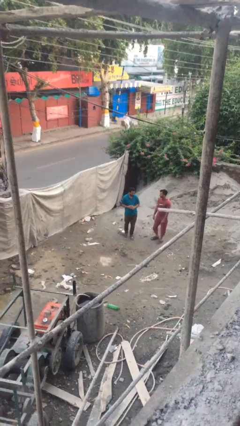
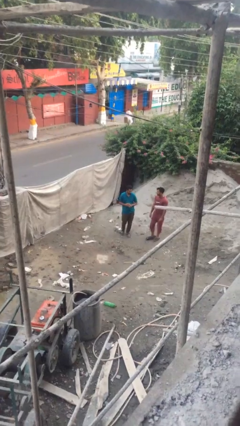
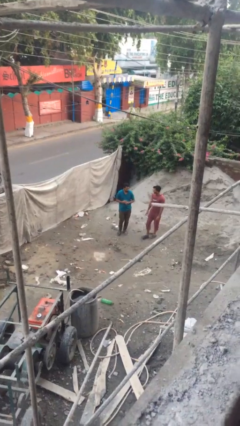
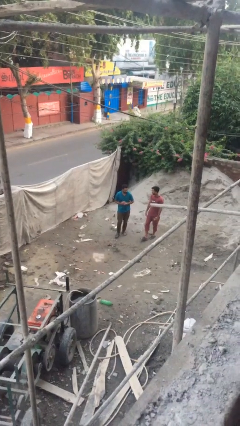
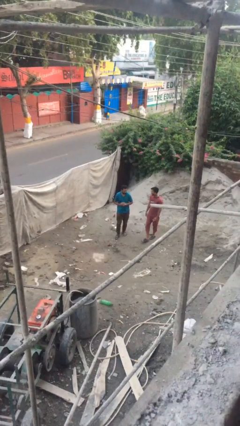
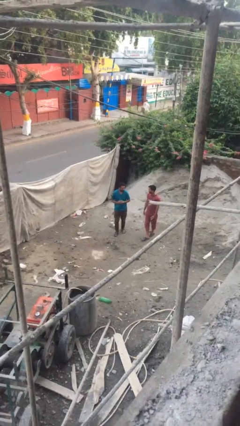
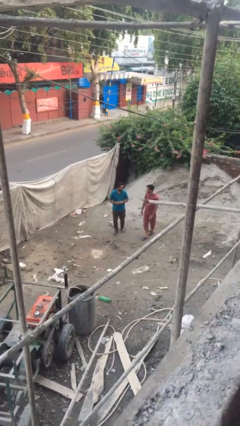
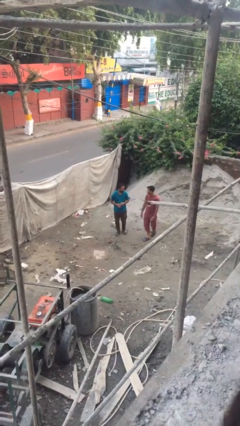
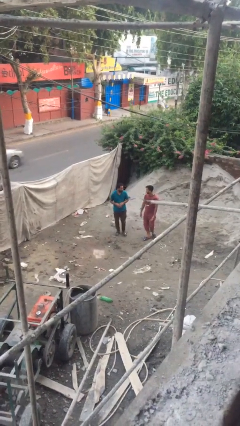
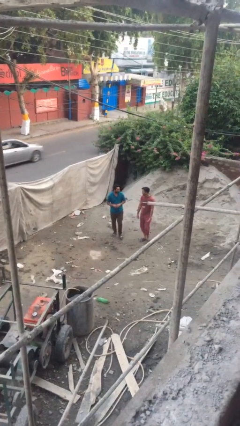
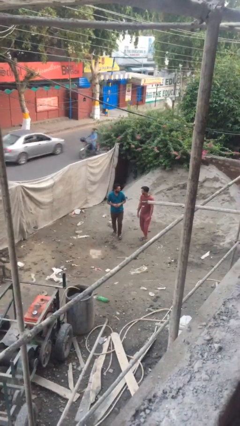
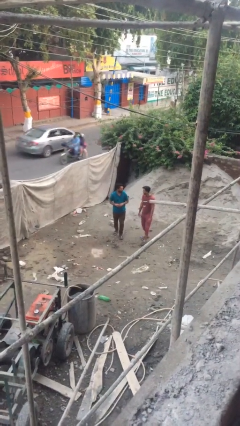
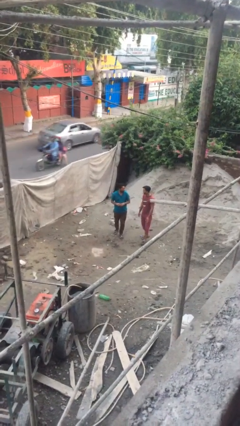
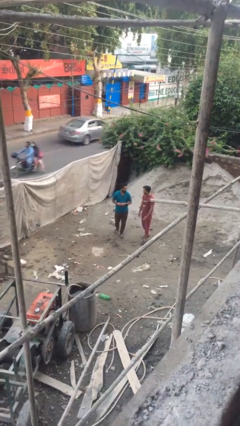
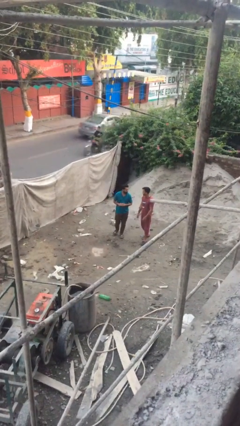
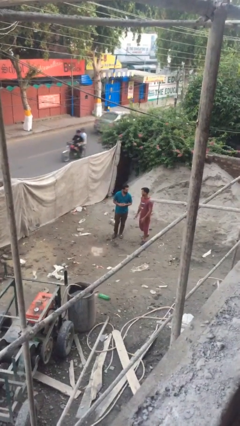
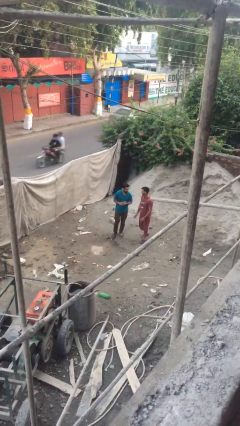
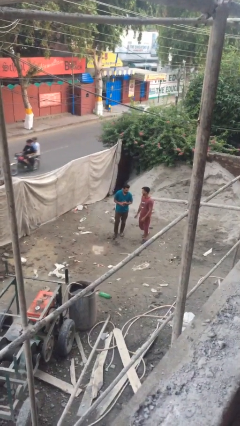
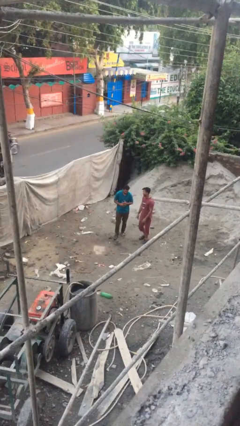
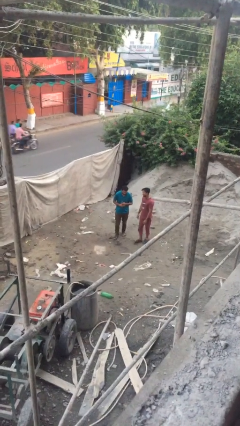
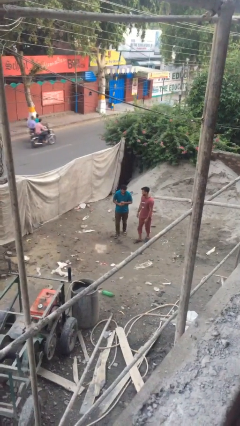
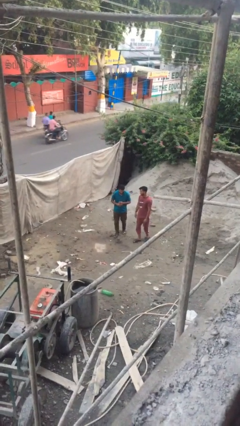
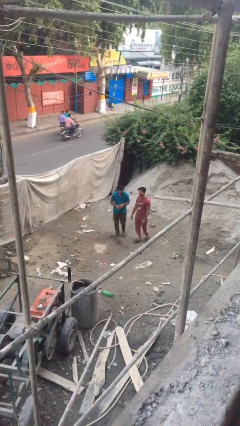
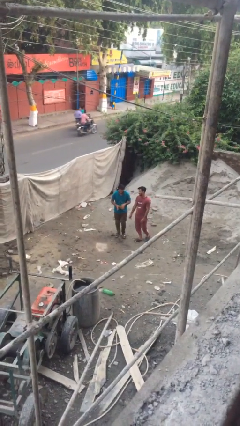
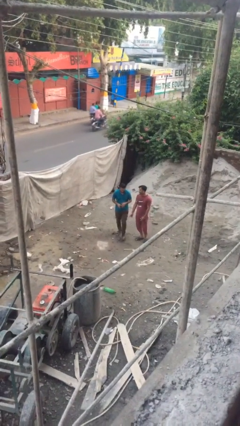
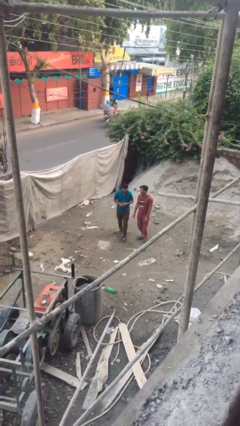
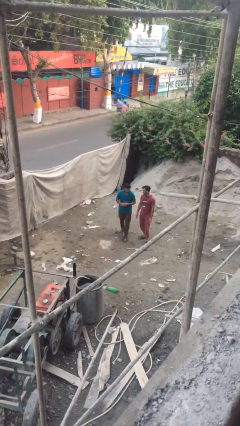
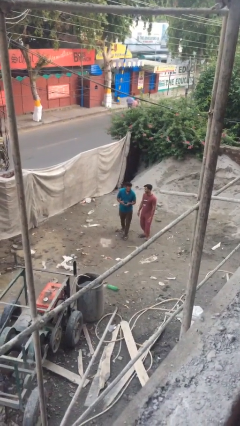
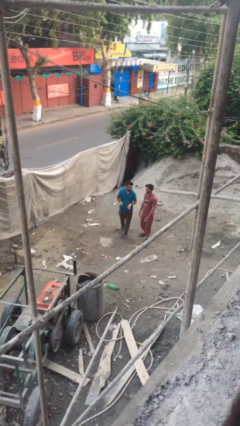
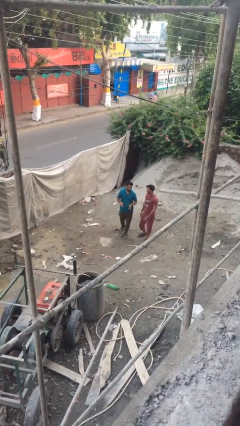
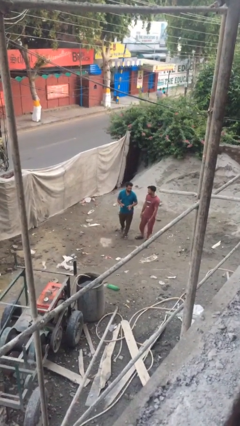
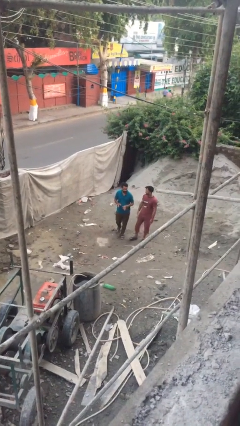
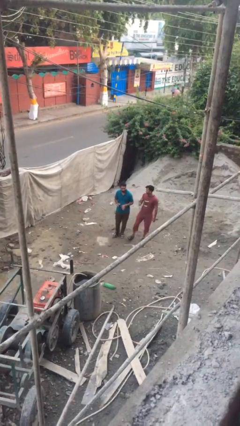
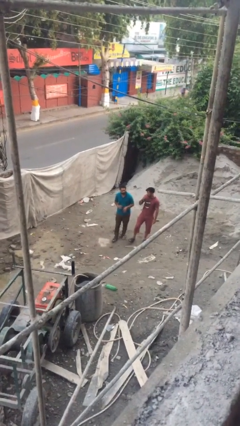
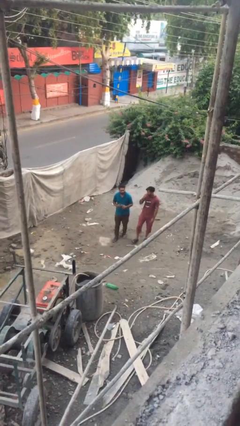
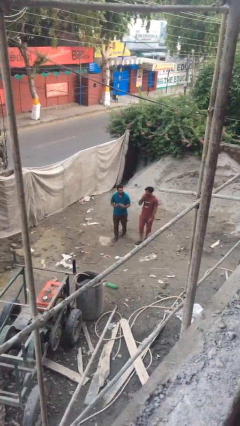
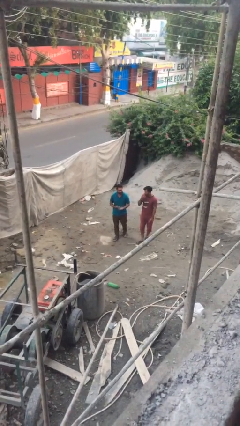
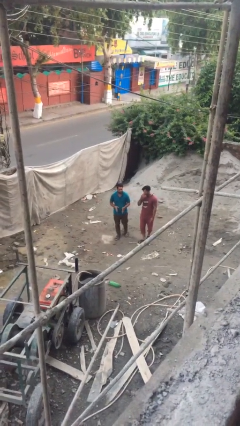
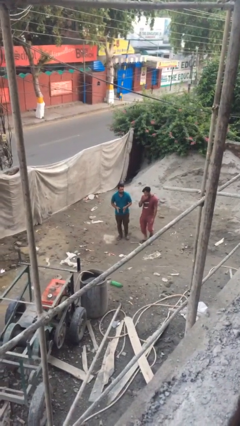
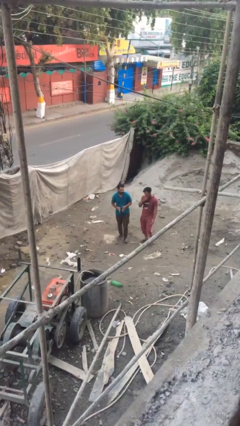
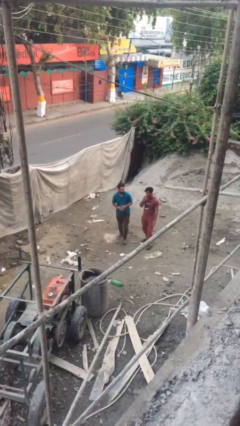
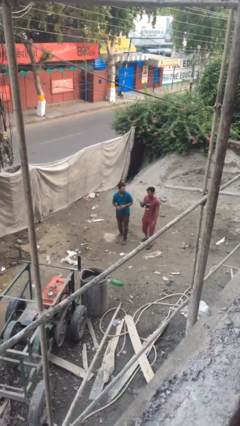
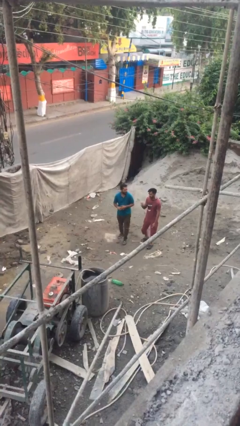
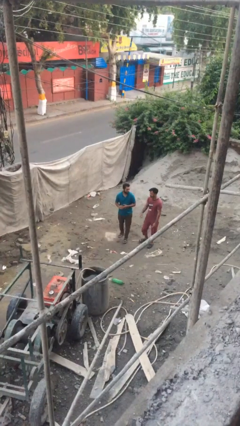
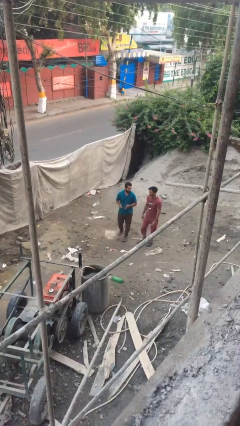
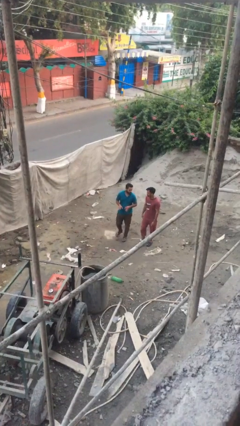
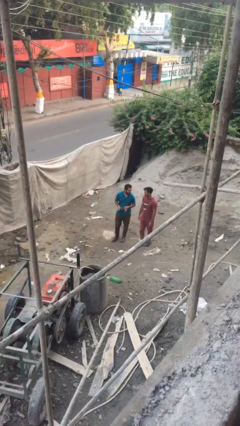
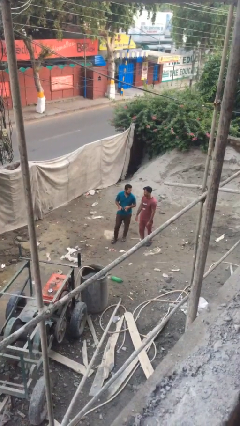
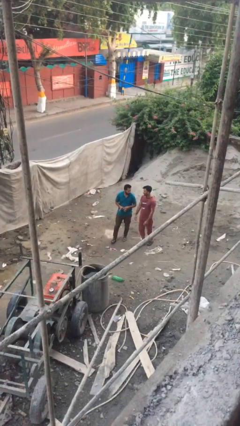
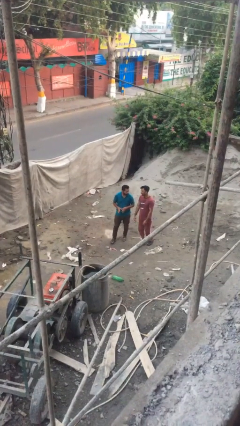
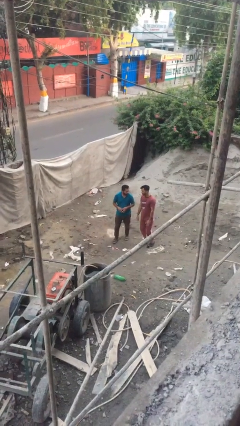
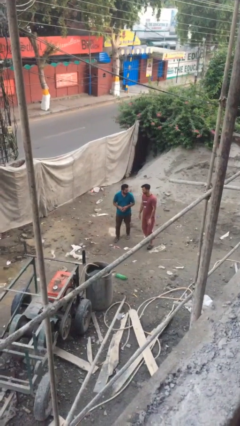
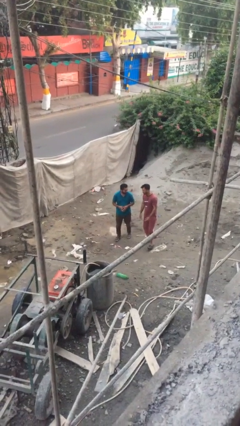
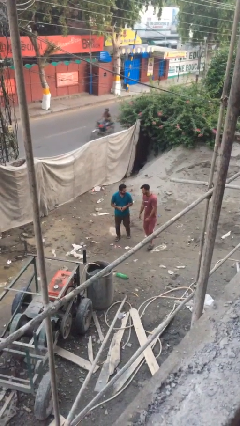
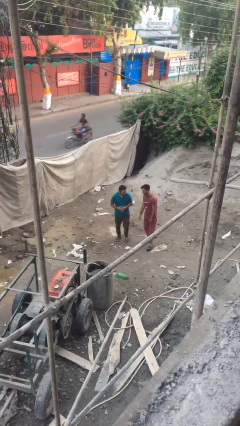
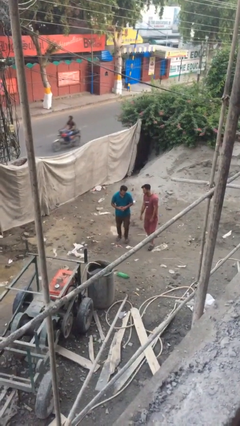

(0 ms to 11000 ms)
person talks to person

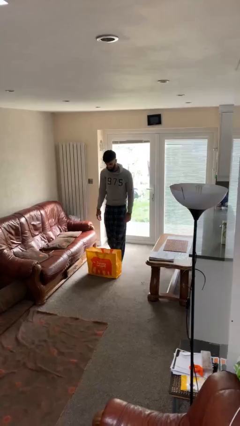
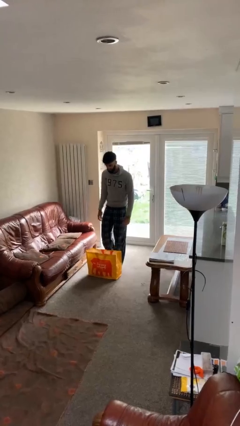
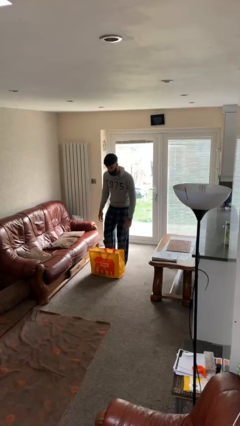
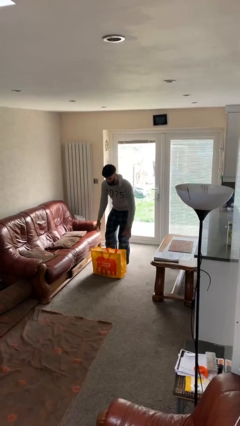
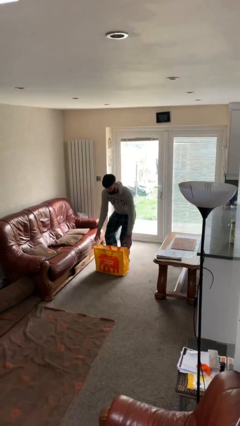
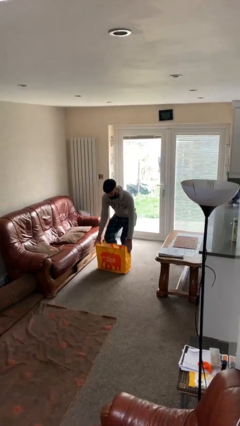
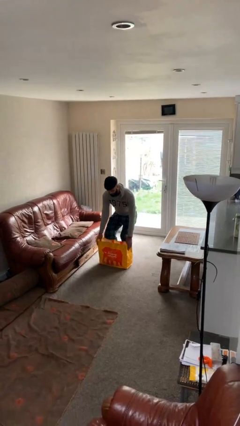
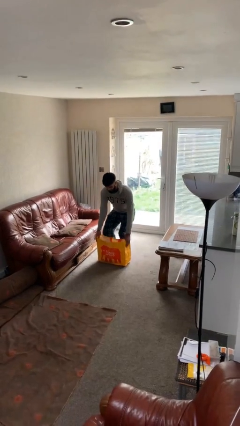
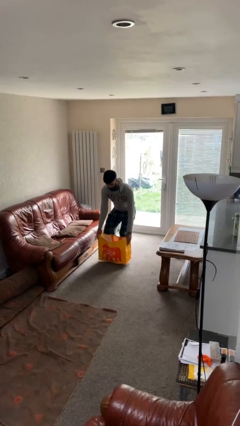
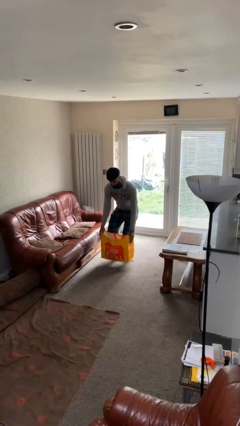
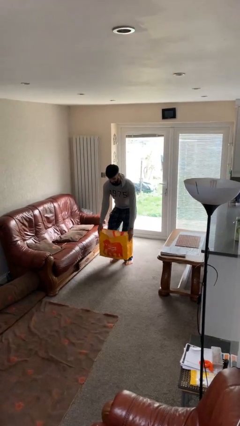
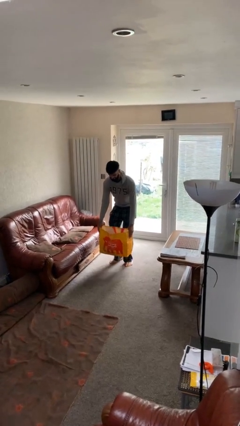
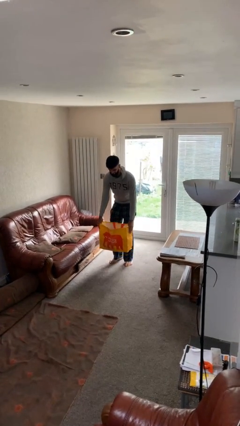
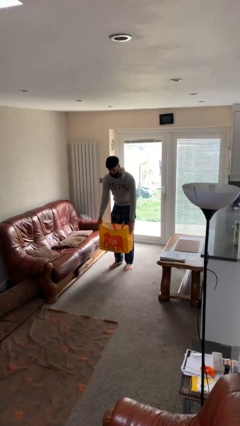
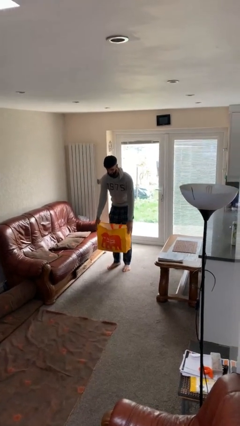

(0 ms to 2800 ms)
person picks up object from floor

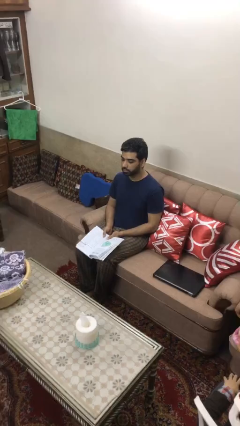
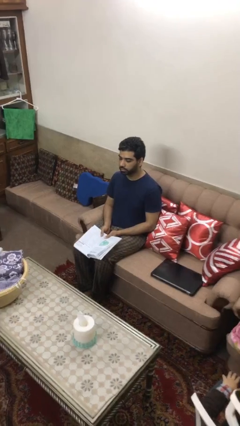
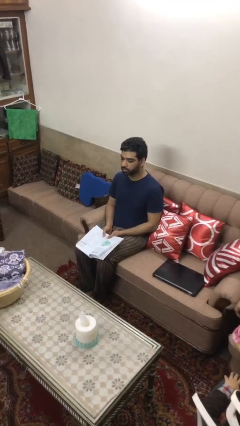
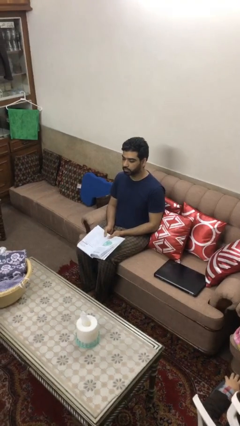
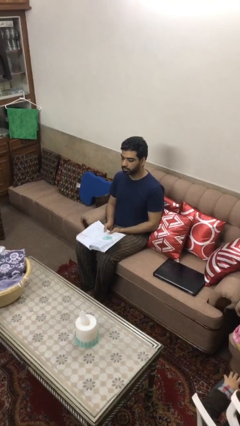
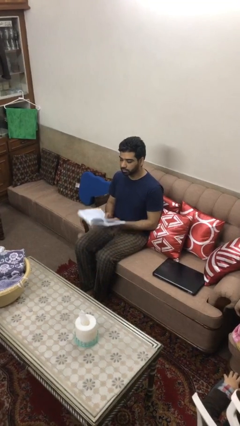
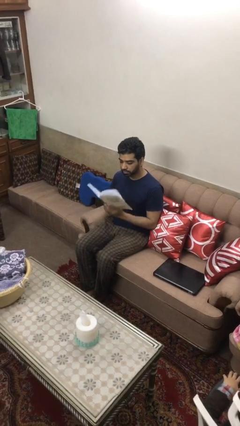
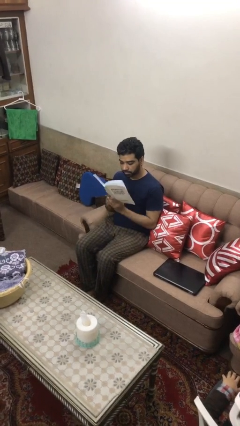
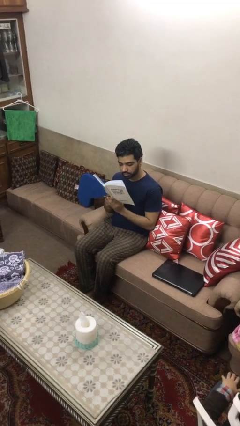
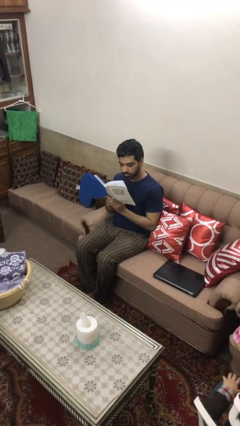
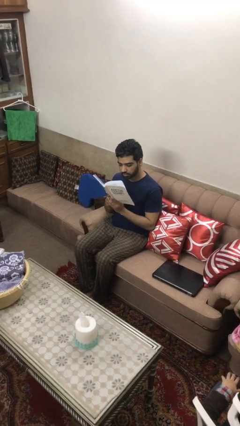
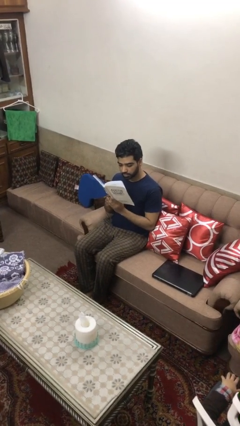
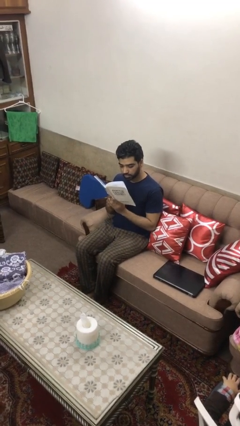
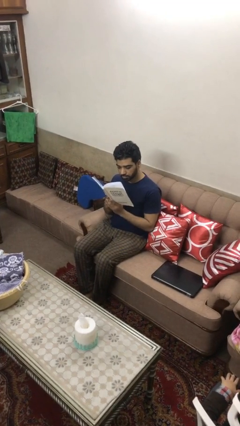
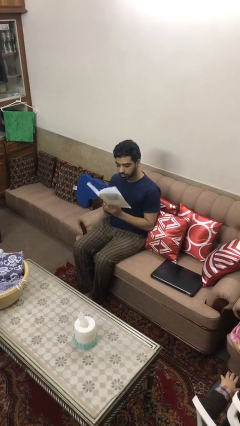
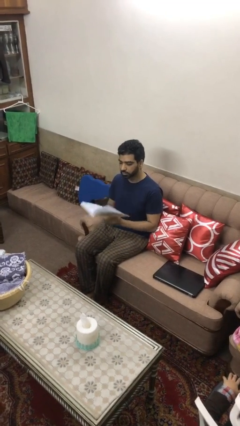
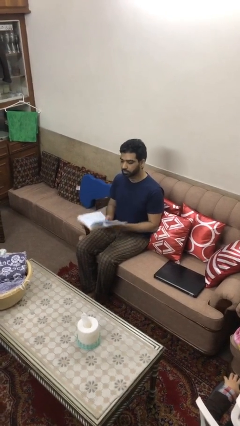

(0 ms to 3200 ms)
person reads document

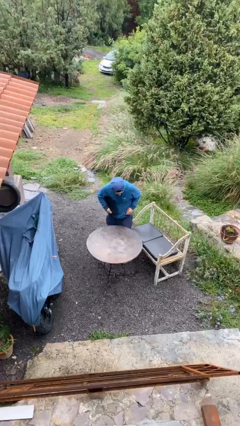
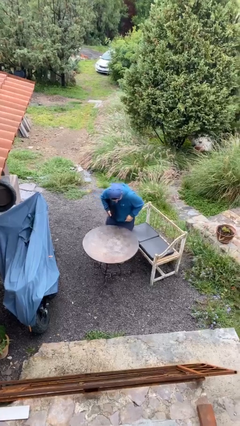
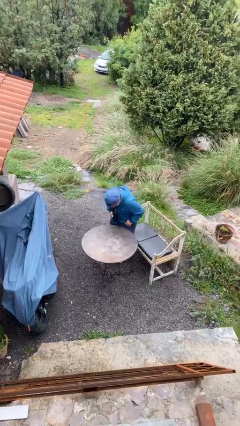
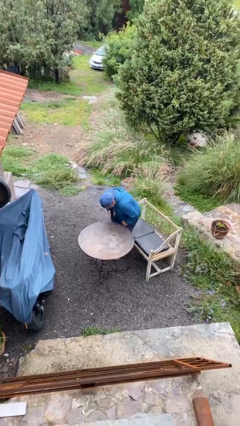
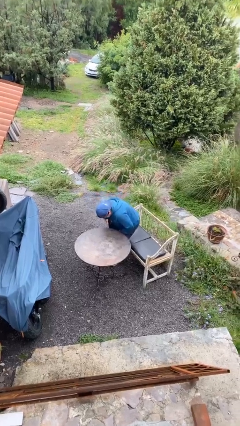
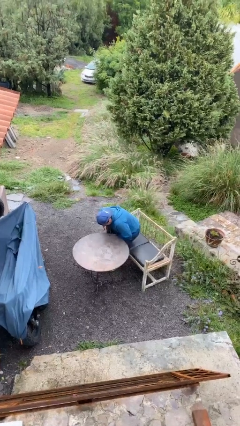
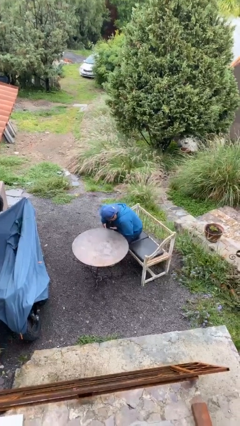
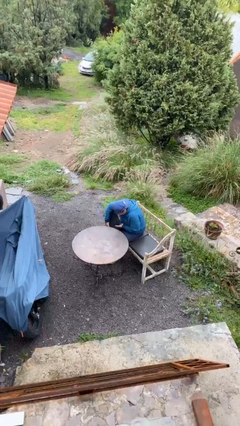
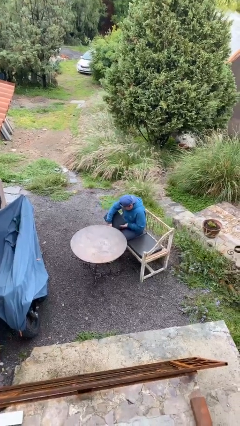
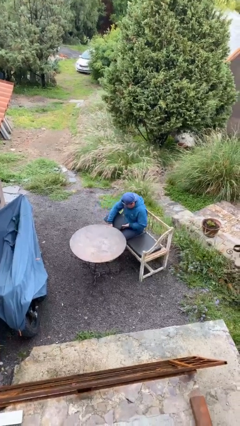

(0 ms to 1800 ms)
person sits down
